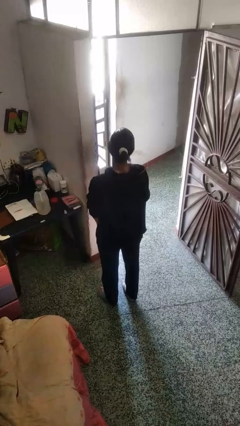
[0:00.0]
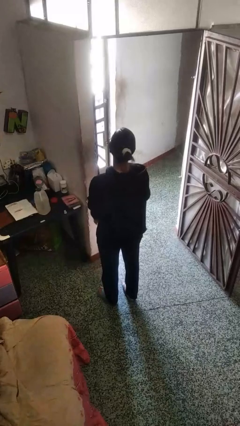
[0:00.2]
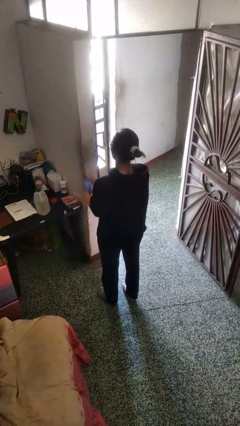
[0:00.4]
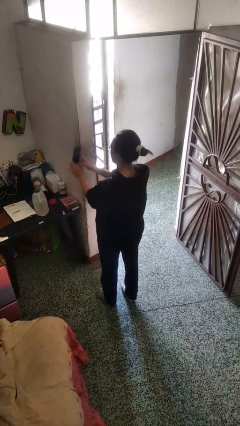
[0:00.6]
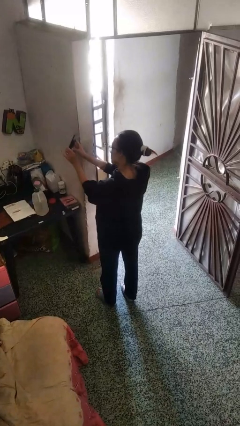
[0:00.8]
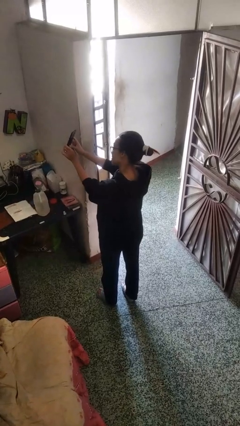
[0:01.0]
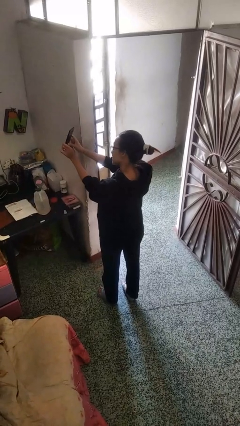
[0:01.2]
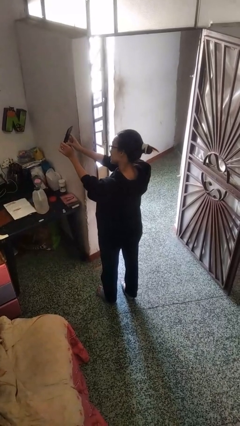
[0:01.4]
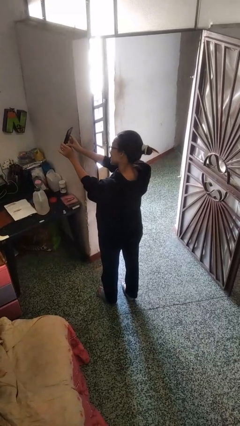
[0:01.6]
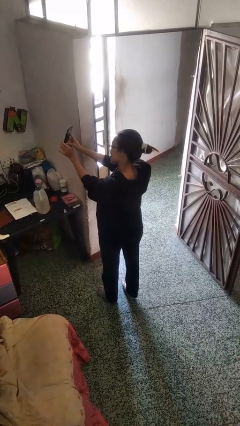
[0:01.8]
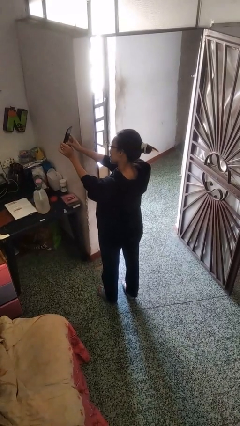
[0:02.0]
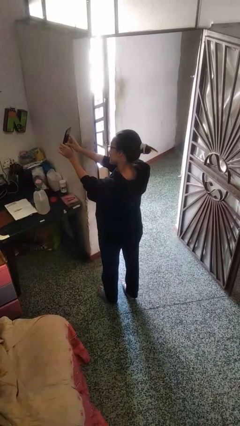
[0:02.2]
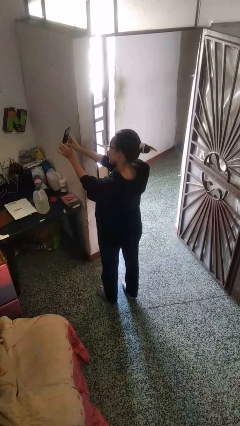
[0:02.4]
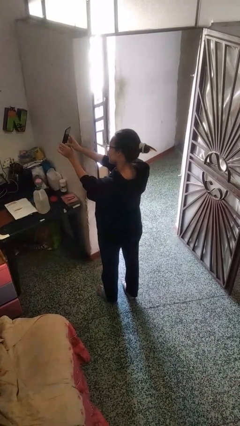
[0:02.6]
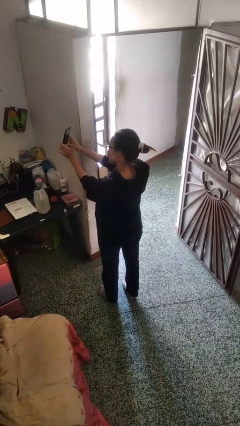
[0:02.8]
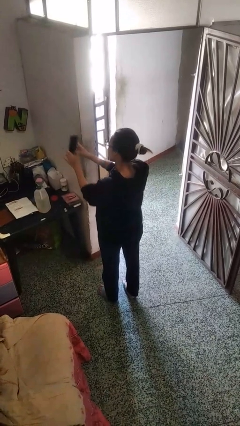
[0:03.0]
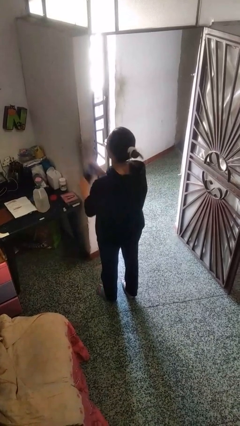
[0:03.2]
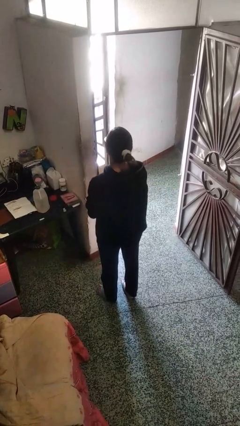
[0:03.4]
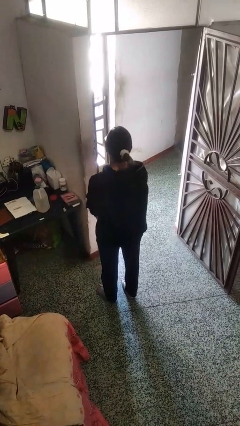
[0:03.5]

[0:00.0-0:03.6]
person takes selfie

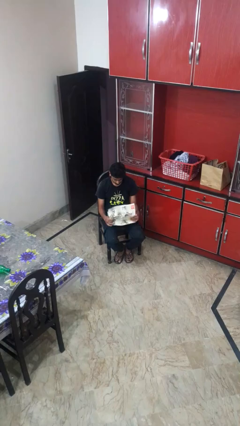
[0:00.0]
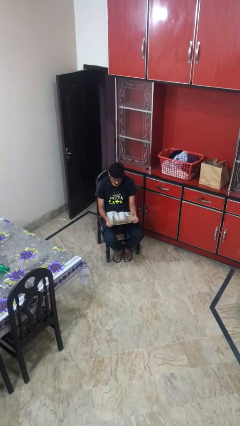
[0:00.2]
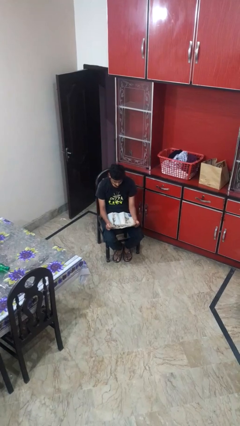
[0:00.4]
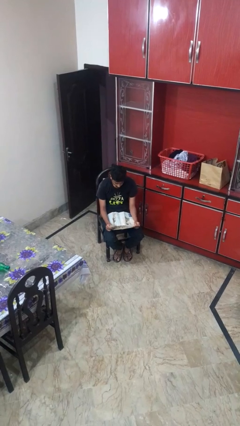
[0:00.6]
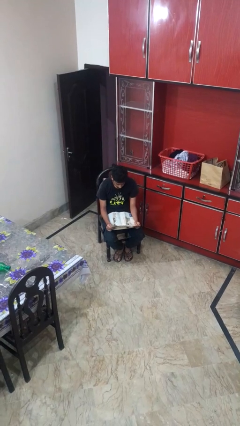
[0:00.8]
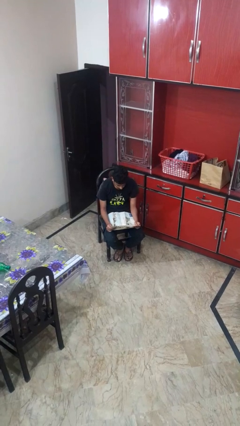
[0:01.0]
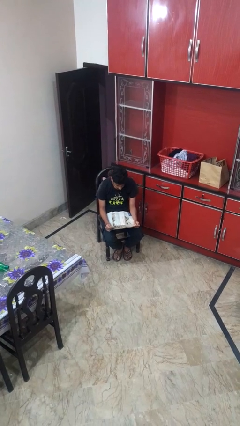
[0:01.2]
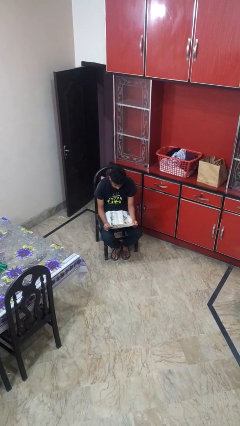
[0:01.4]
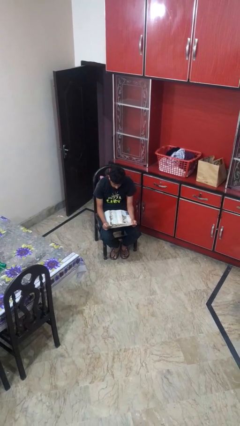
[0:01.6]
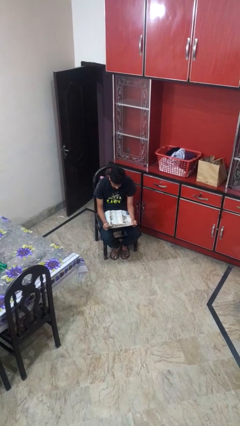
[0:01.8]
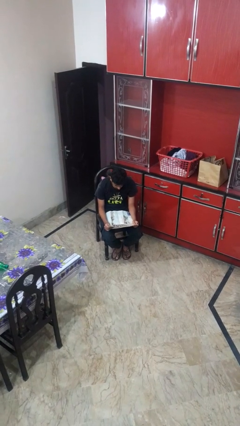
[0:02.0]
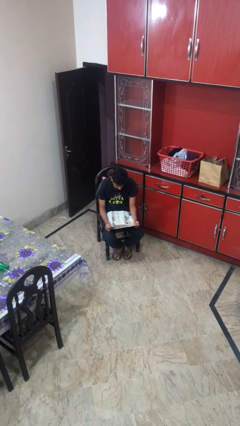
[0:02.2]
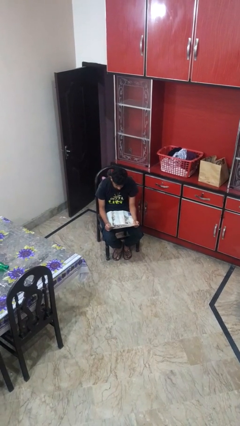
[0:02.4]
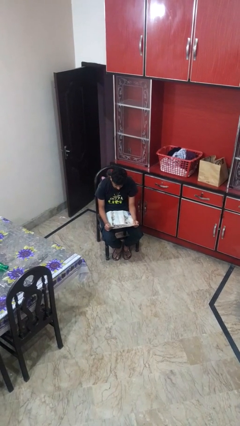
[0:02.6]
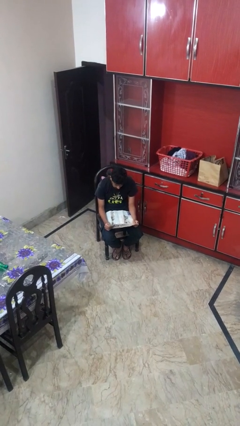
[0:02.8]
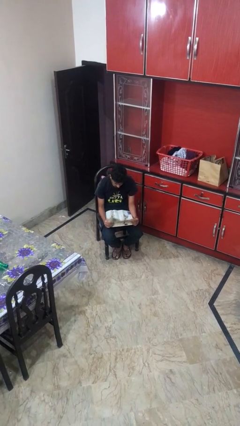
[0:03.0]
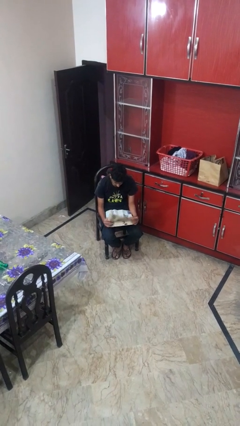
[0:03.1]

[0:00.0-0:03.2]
person reads newspaper

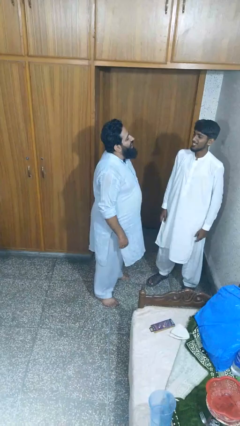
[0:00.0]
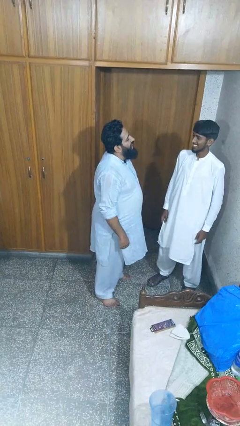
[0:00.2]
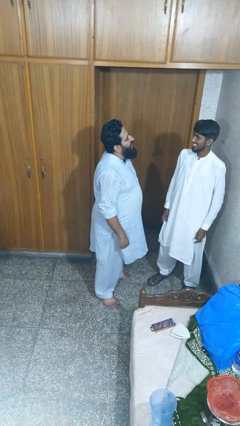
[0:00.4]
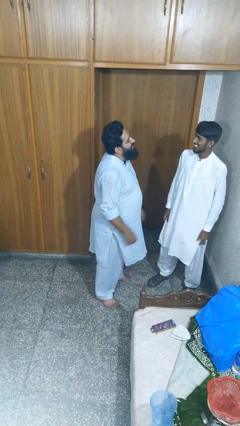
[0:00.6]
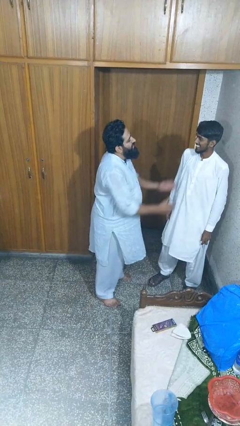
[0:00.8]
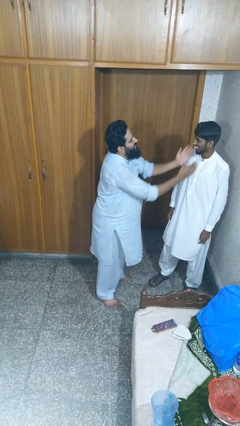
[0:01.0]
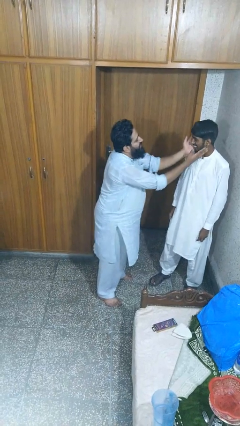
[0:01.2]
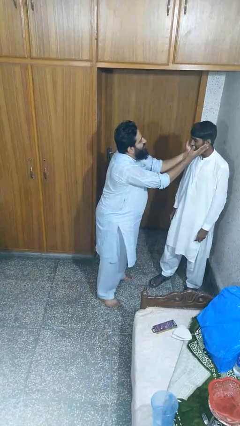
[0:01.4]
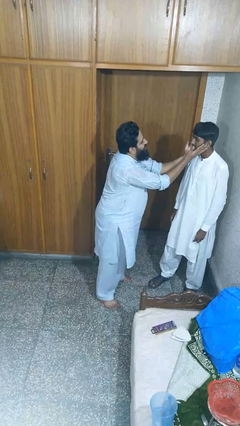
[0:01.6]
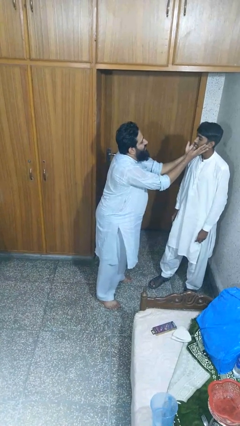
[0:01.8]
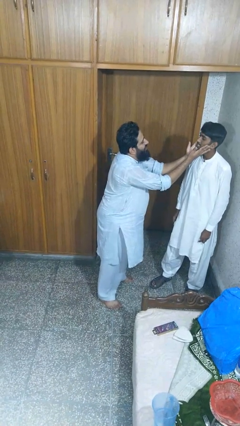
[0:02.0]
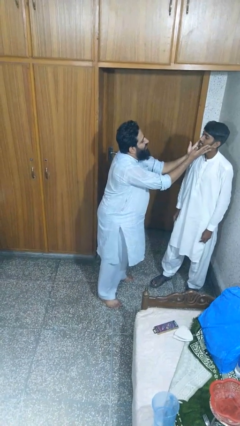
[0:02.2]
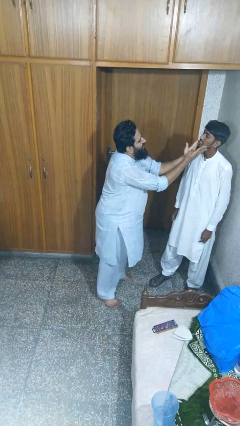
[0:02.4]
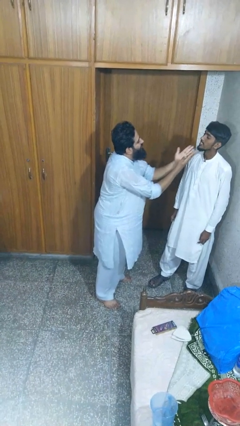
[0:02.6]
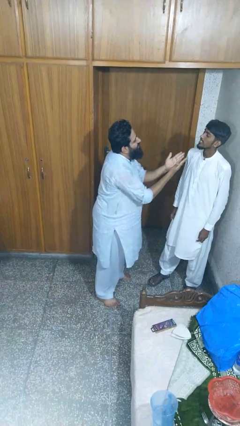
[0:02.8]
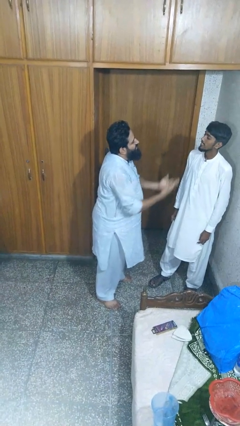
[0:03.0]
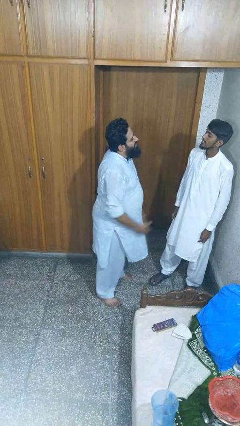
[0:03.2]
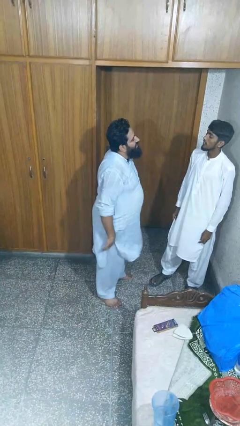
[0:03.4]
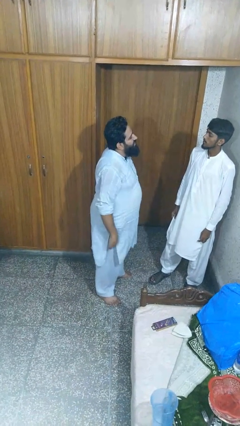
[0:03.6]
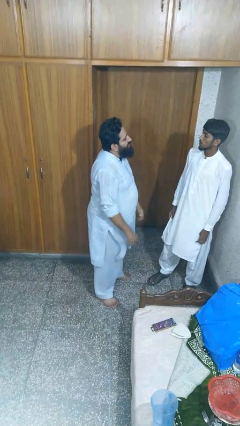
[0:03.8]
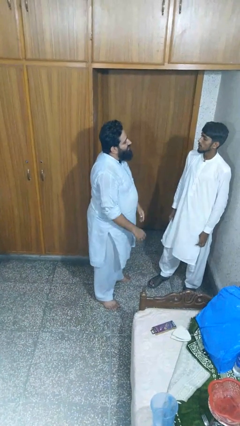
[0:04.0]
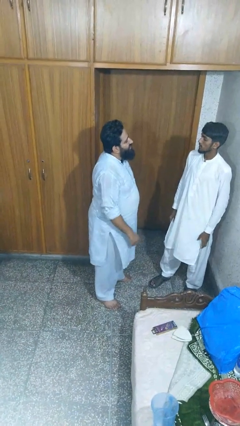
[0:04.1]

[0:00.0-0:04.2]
person touches face of person

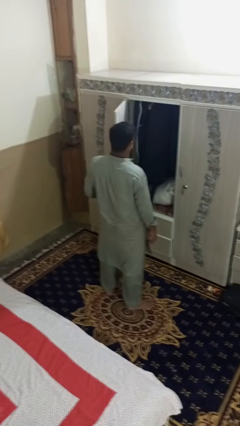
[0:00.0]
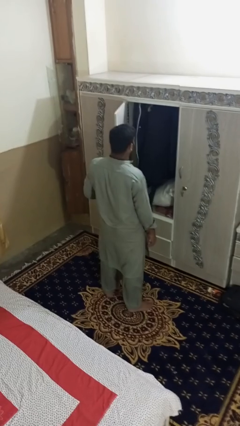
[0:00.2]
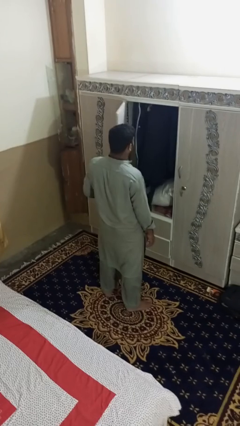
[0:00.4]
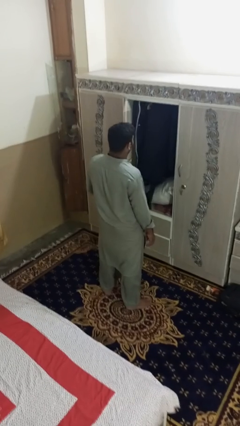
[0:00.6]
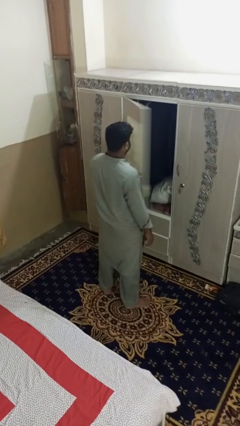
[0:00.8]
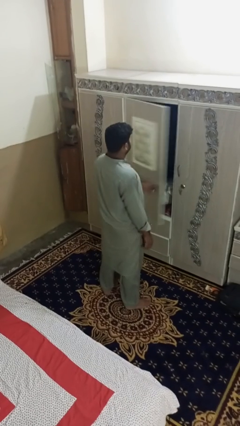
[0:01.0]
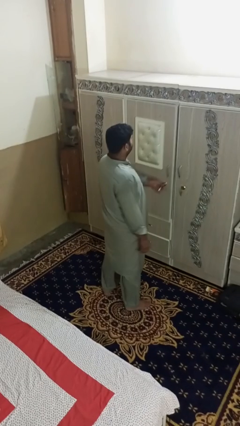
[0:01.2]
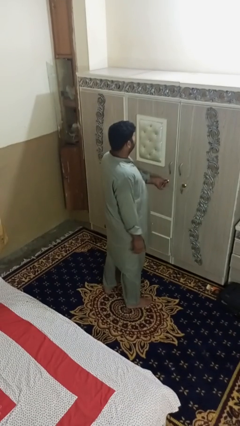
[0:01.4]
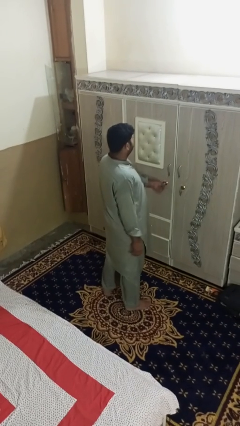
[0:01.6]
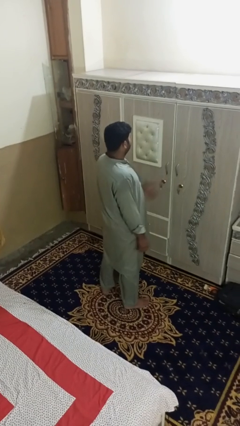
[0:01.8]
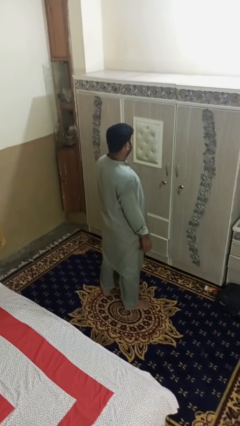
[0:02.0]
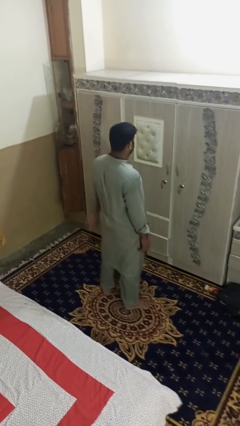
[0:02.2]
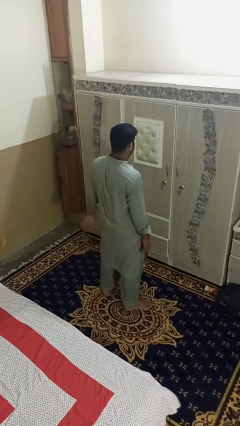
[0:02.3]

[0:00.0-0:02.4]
person closes dresser drawer

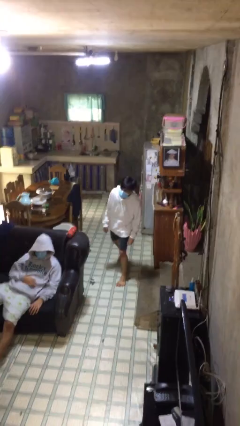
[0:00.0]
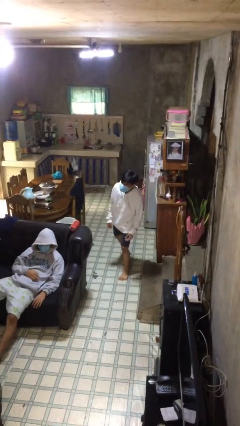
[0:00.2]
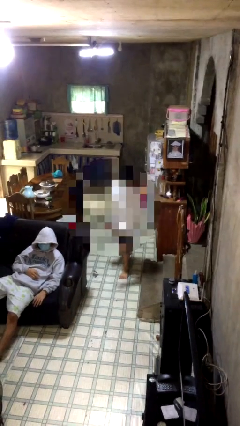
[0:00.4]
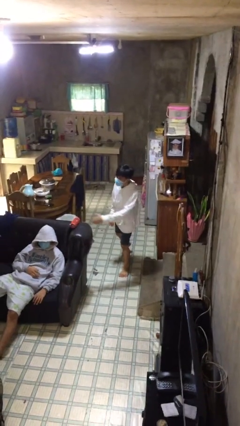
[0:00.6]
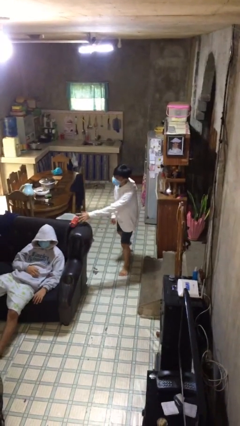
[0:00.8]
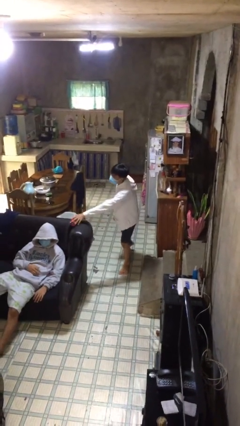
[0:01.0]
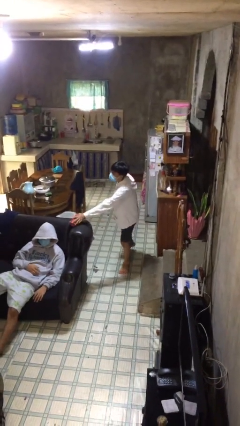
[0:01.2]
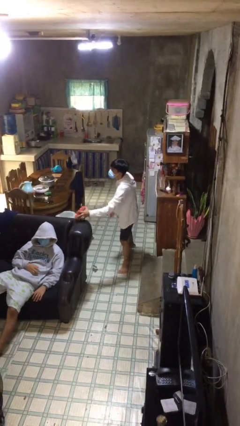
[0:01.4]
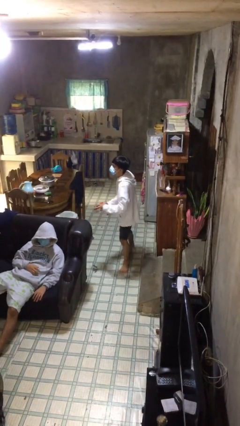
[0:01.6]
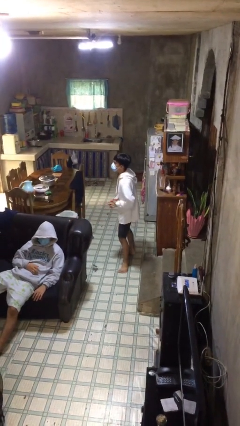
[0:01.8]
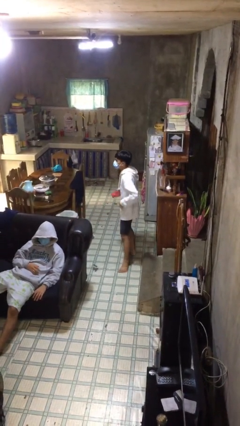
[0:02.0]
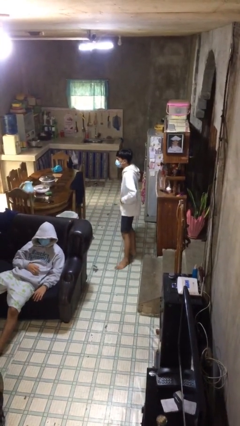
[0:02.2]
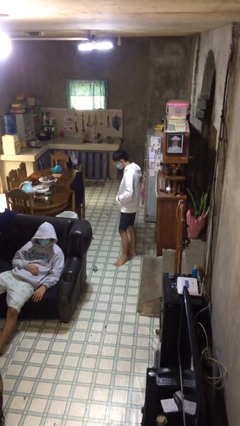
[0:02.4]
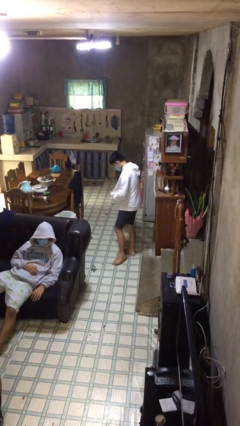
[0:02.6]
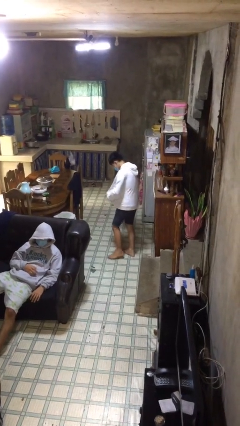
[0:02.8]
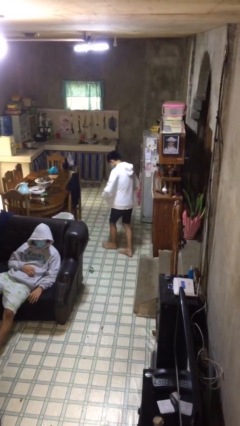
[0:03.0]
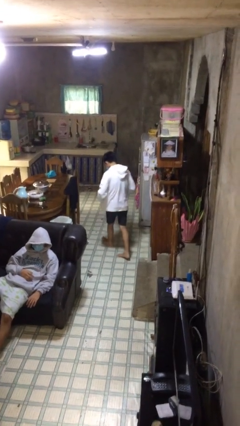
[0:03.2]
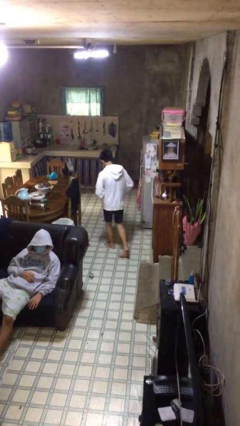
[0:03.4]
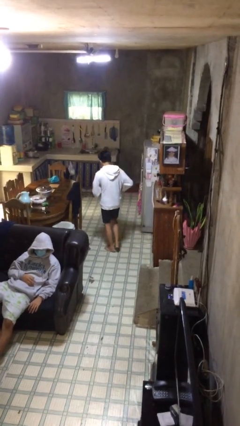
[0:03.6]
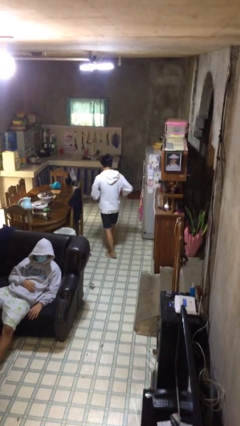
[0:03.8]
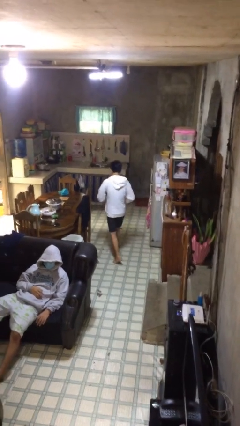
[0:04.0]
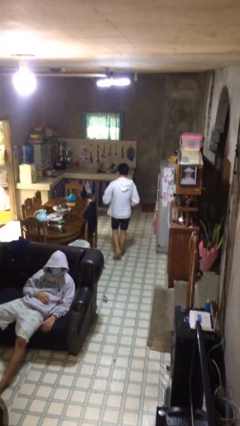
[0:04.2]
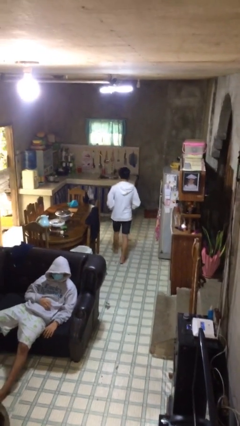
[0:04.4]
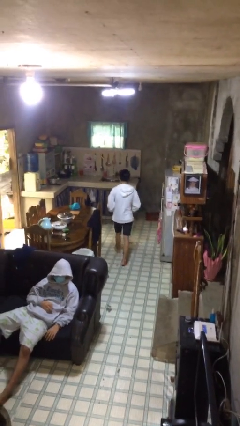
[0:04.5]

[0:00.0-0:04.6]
person steals object from person
